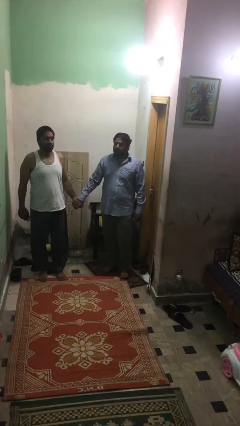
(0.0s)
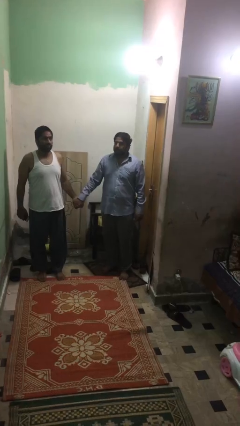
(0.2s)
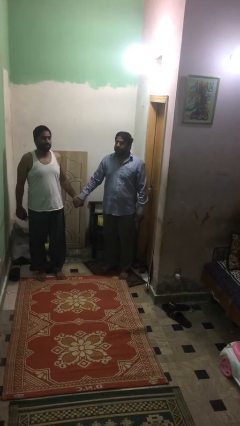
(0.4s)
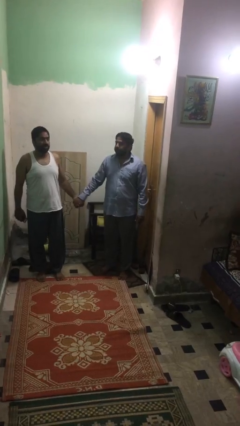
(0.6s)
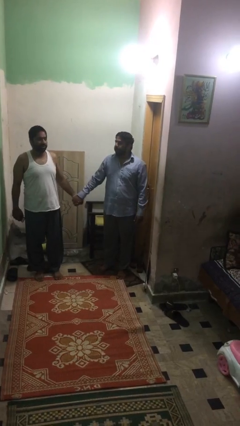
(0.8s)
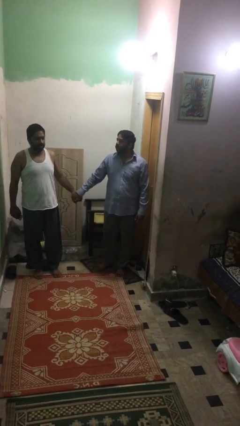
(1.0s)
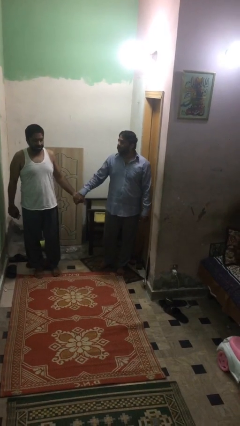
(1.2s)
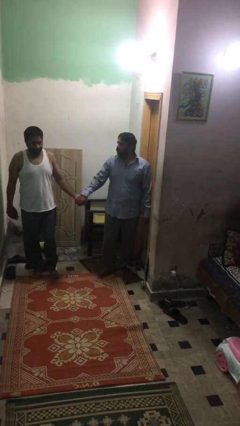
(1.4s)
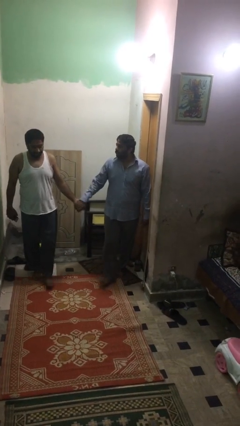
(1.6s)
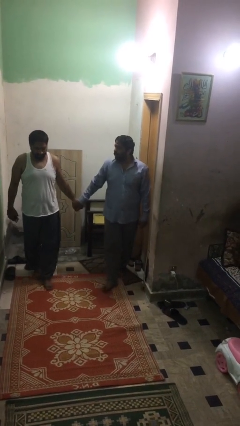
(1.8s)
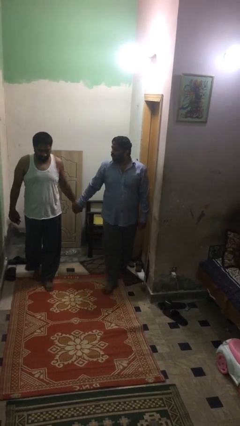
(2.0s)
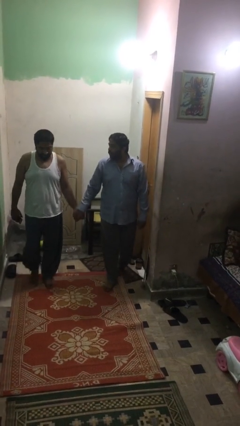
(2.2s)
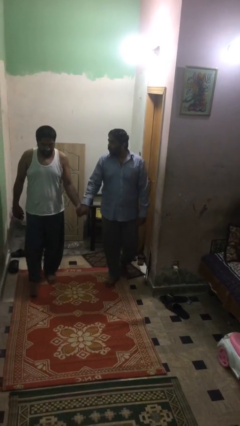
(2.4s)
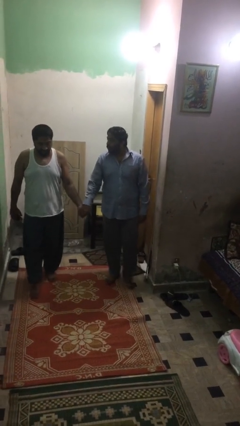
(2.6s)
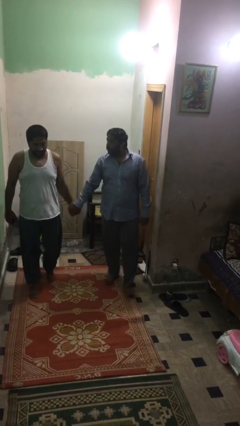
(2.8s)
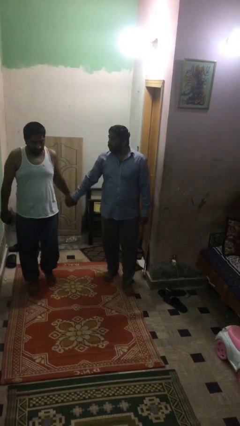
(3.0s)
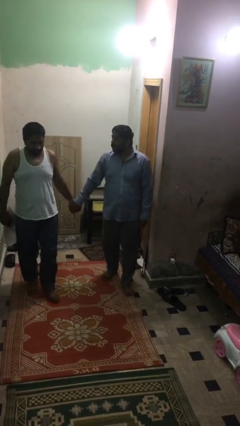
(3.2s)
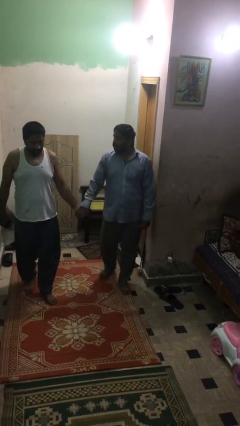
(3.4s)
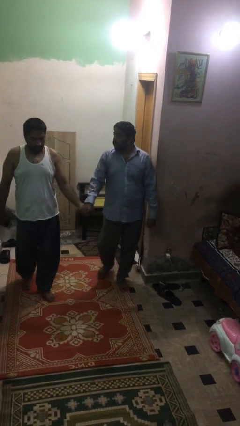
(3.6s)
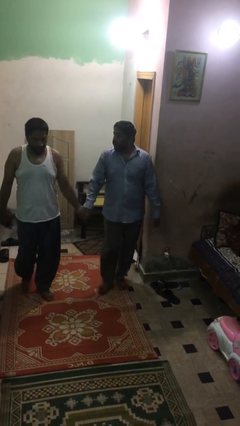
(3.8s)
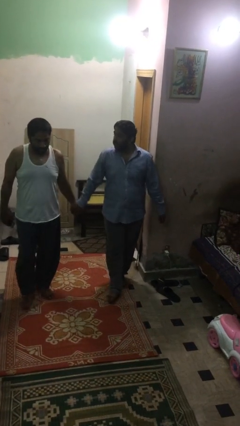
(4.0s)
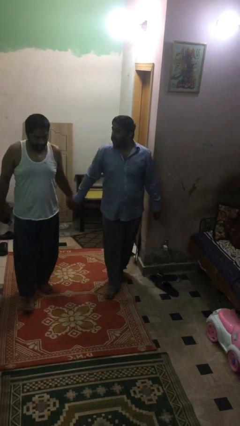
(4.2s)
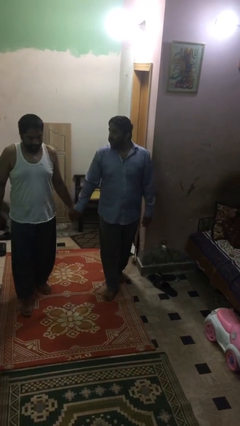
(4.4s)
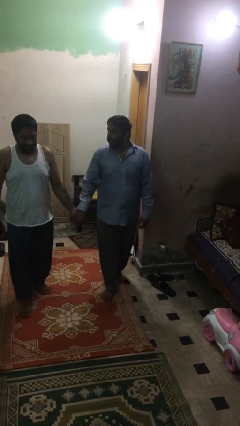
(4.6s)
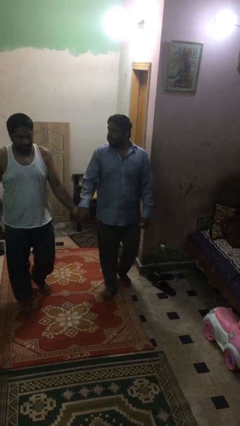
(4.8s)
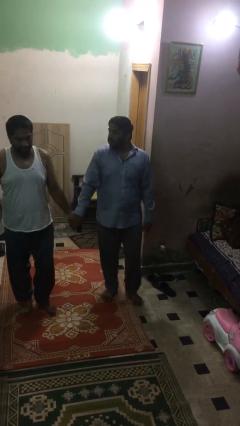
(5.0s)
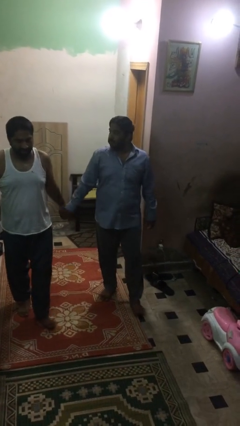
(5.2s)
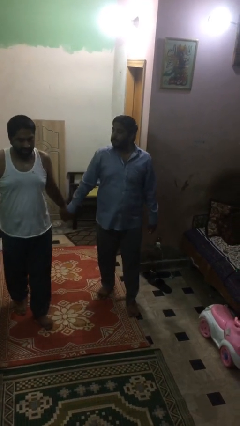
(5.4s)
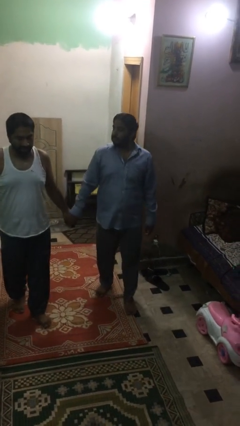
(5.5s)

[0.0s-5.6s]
person holds hand

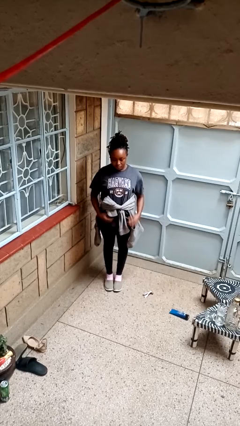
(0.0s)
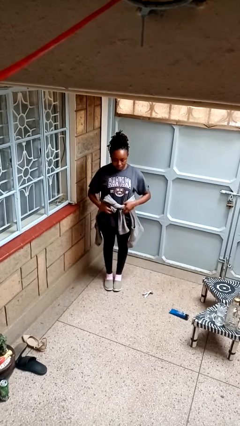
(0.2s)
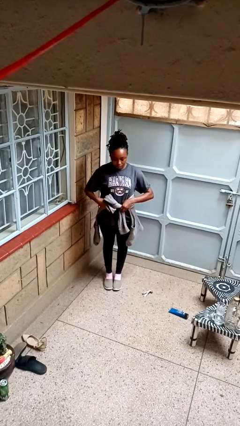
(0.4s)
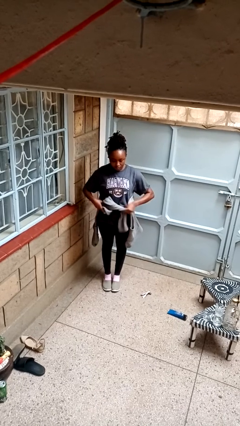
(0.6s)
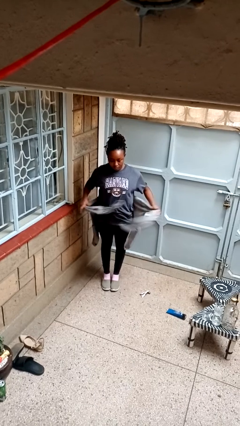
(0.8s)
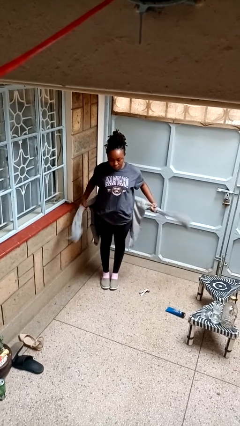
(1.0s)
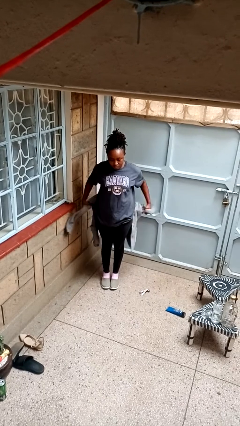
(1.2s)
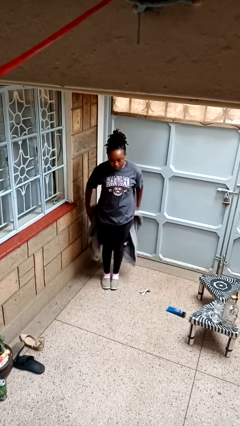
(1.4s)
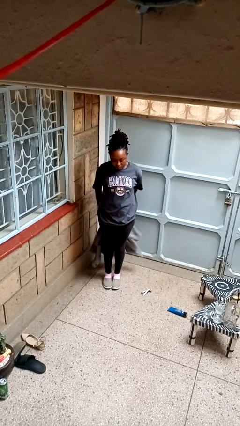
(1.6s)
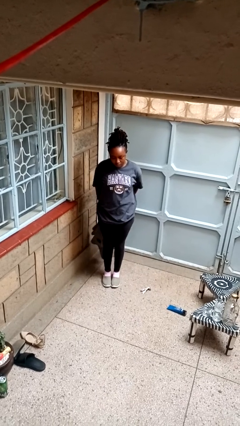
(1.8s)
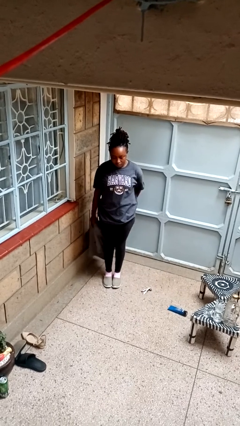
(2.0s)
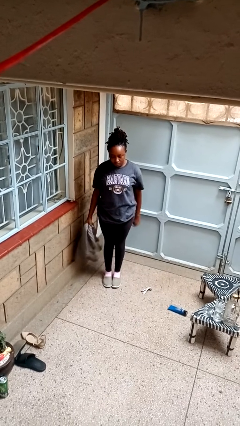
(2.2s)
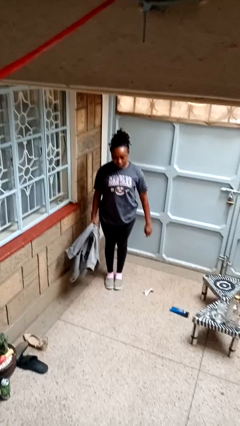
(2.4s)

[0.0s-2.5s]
person unties jacket around waist

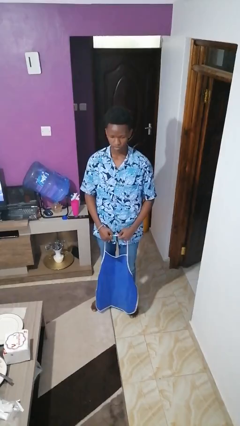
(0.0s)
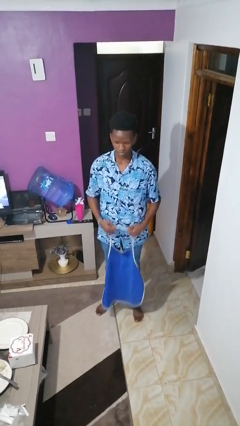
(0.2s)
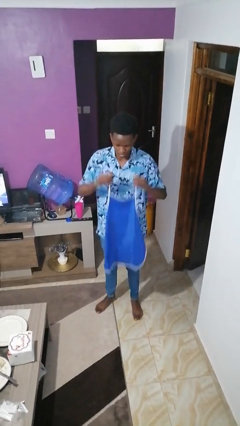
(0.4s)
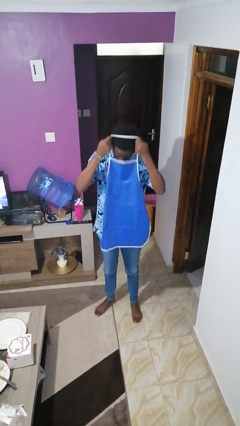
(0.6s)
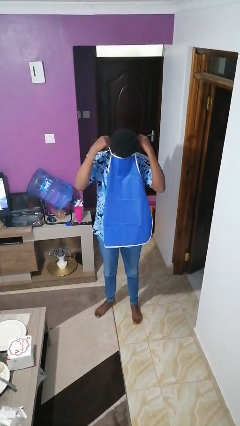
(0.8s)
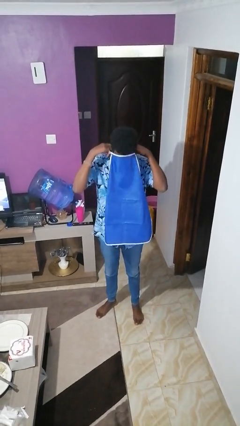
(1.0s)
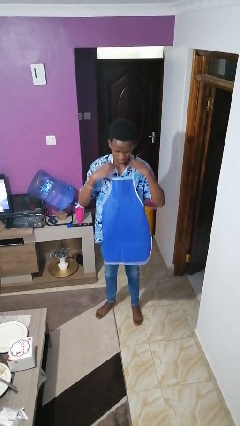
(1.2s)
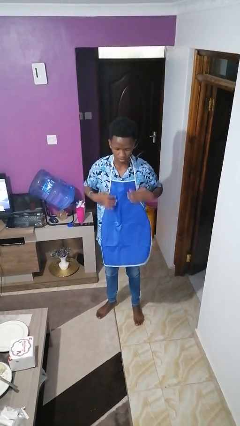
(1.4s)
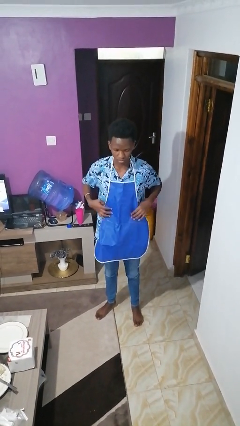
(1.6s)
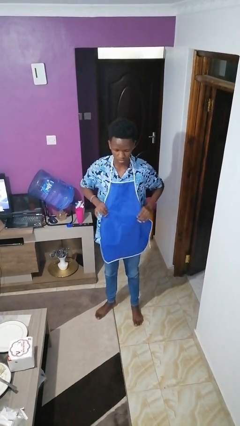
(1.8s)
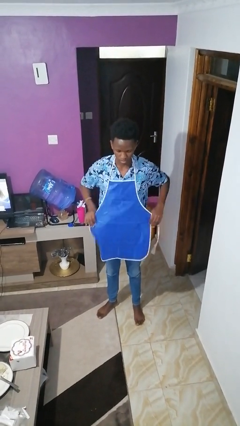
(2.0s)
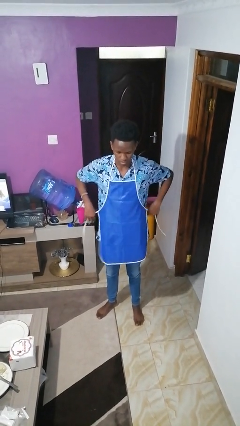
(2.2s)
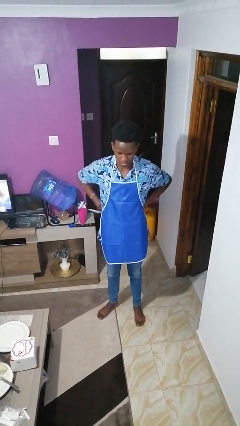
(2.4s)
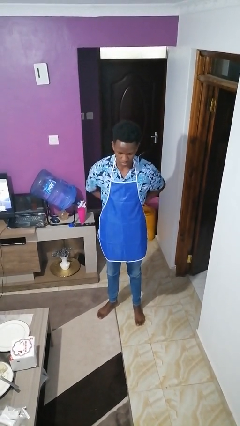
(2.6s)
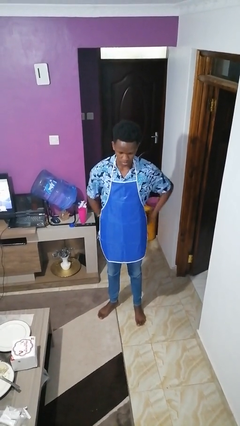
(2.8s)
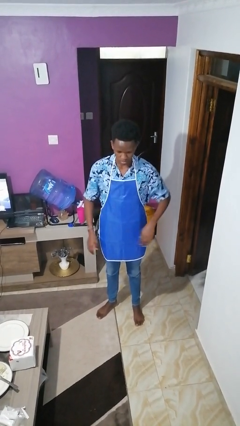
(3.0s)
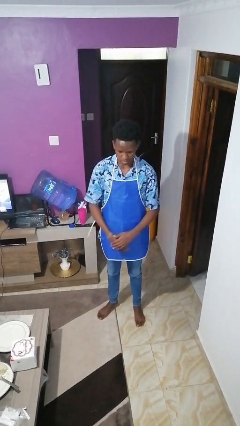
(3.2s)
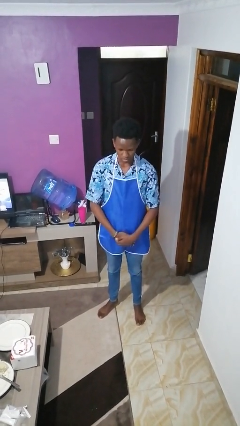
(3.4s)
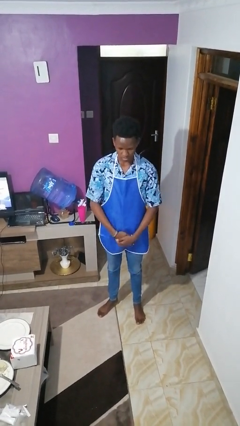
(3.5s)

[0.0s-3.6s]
person puts on apron

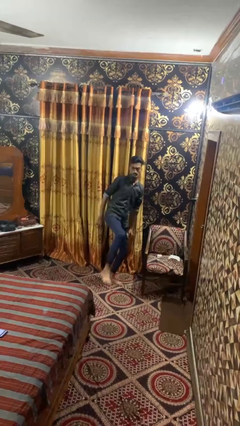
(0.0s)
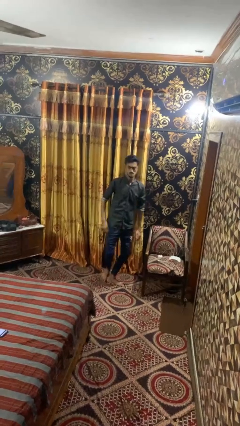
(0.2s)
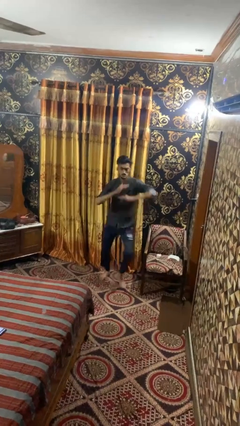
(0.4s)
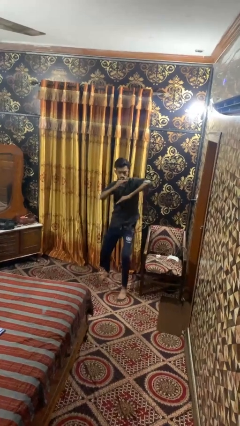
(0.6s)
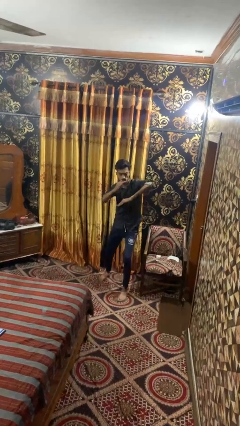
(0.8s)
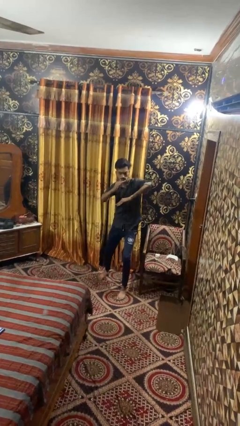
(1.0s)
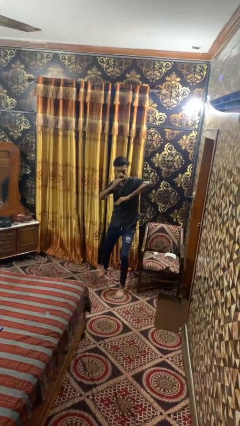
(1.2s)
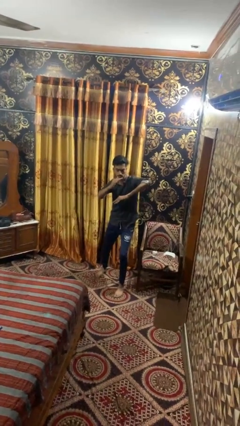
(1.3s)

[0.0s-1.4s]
person karate chop

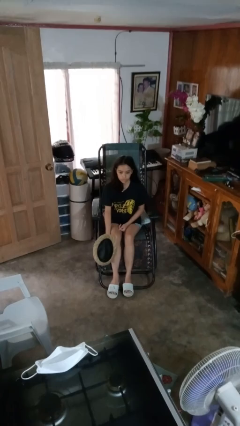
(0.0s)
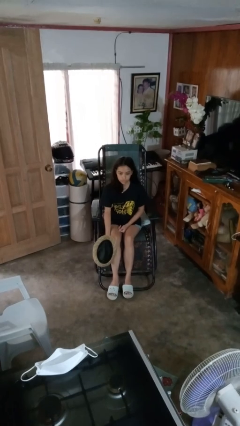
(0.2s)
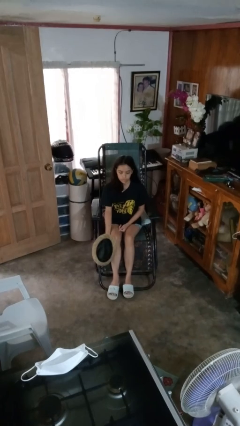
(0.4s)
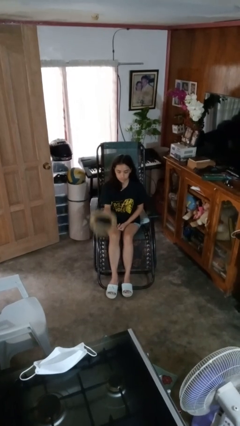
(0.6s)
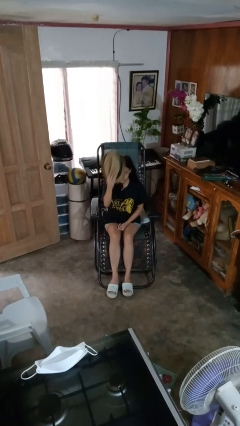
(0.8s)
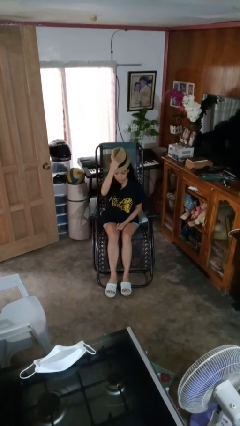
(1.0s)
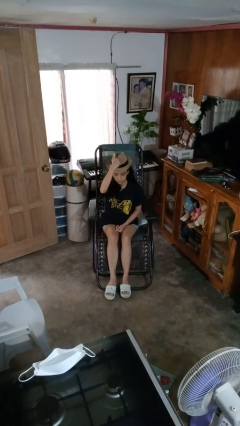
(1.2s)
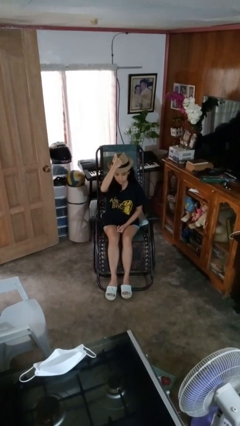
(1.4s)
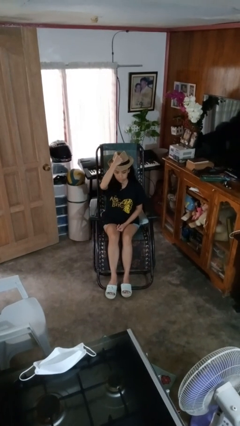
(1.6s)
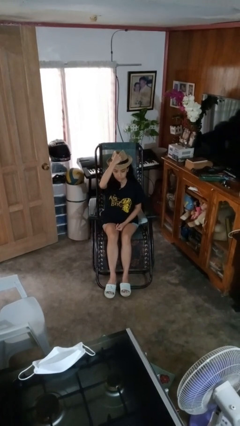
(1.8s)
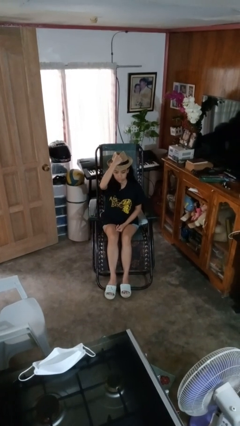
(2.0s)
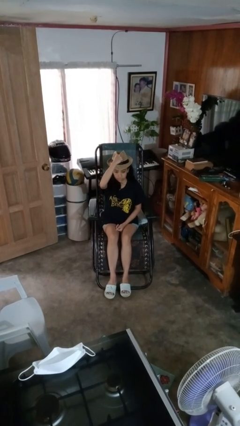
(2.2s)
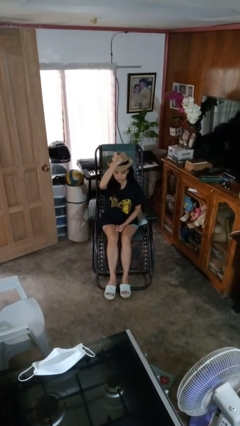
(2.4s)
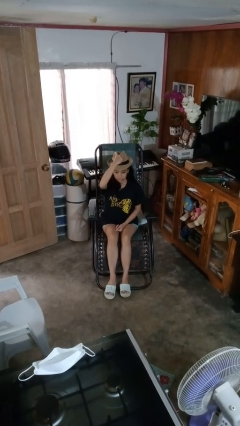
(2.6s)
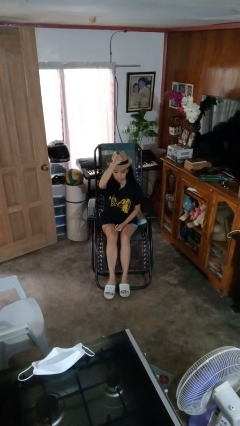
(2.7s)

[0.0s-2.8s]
person puts on hat

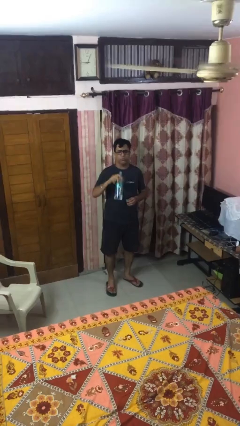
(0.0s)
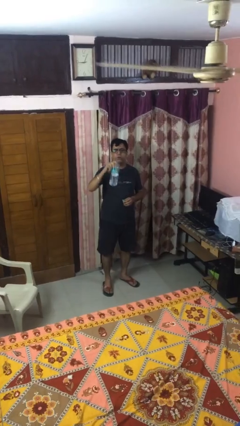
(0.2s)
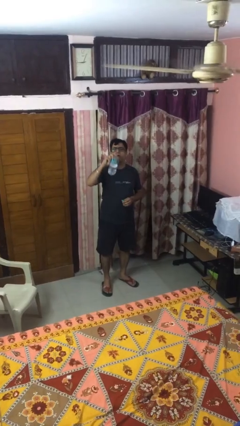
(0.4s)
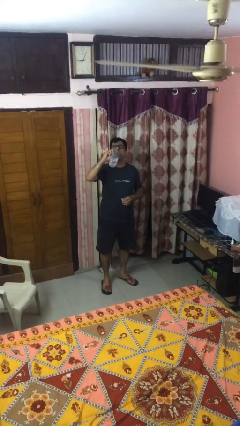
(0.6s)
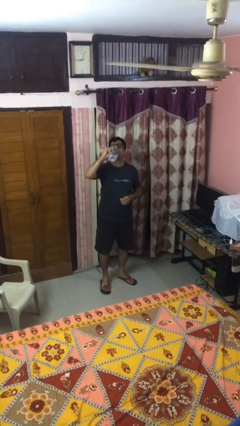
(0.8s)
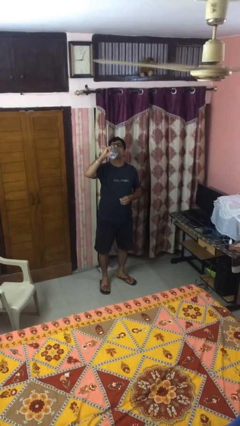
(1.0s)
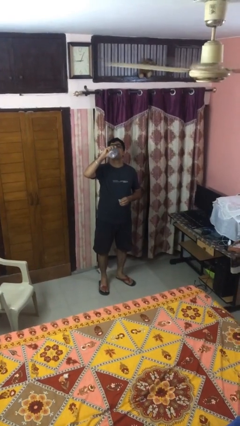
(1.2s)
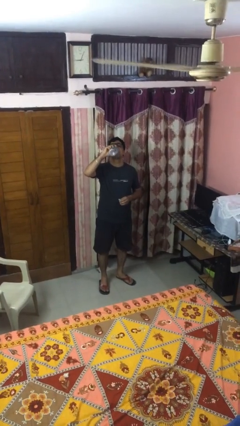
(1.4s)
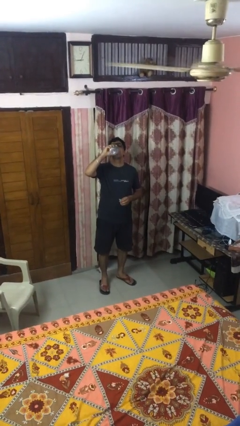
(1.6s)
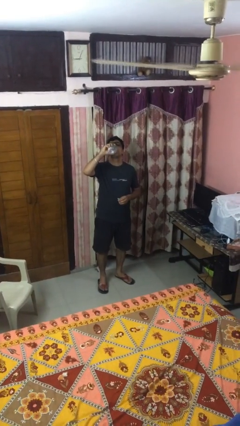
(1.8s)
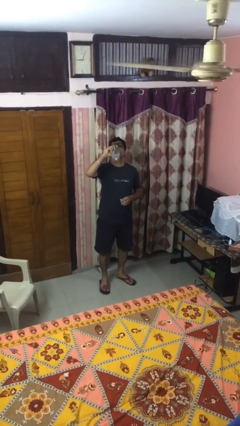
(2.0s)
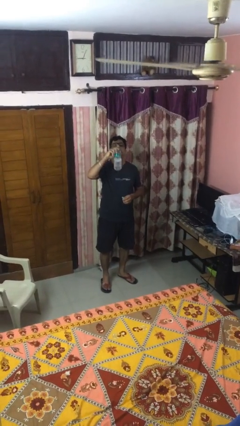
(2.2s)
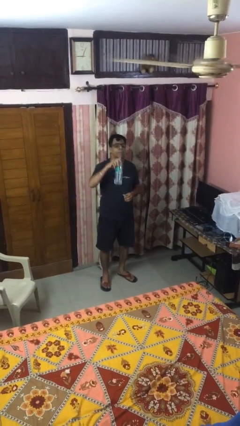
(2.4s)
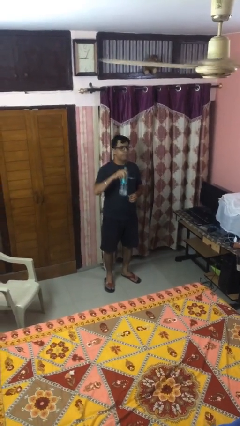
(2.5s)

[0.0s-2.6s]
person drinks from bottle
